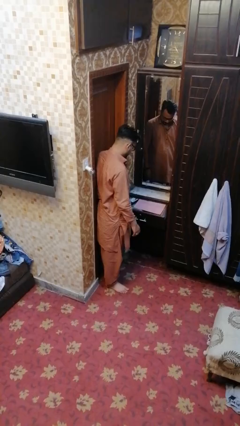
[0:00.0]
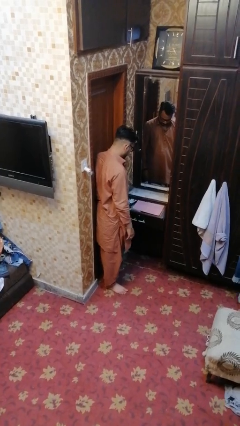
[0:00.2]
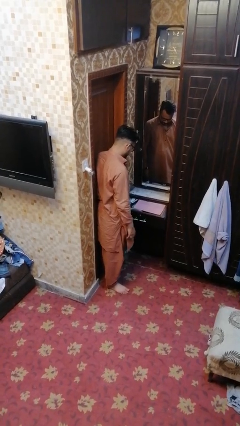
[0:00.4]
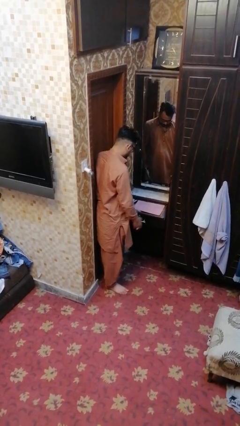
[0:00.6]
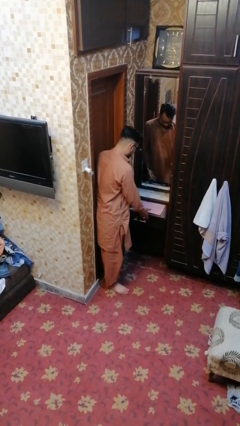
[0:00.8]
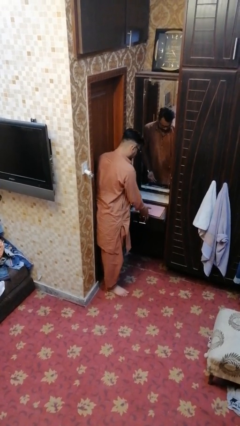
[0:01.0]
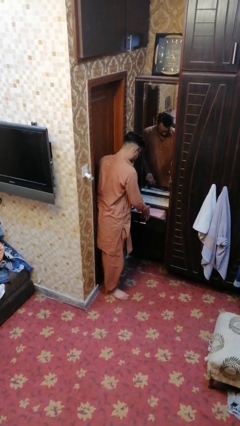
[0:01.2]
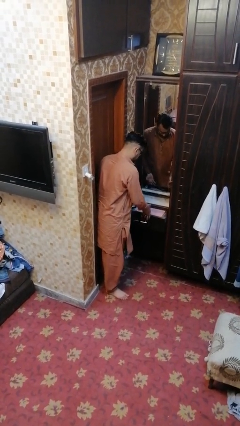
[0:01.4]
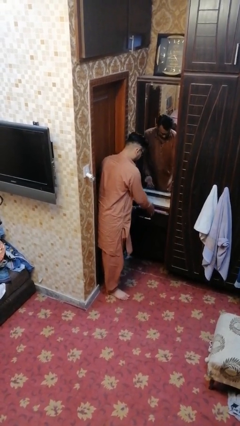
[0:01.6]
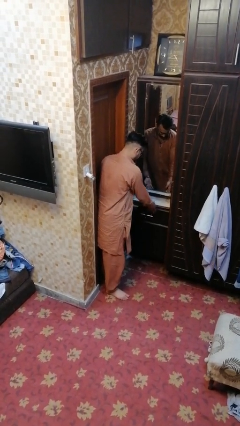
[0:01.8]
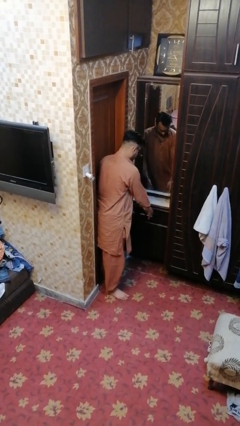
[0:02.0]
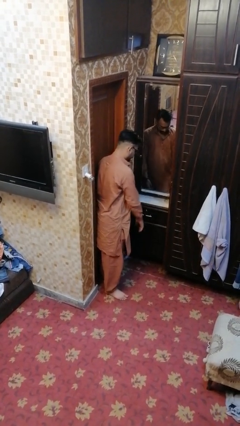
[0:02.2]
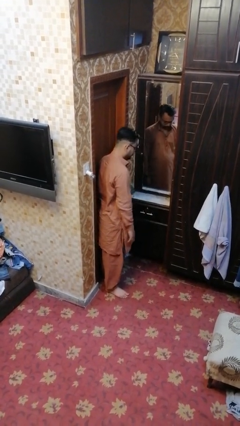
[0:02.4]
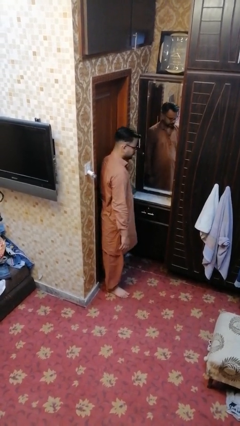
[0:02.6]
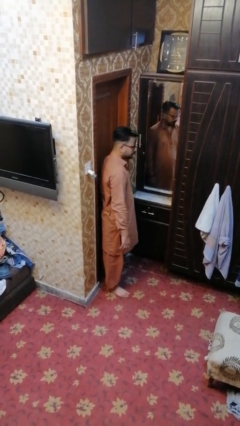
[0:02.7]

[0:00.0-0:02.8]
person closes dresser drawer

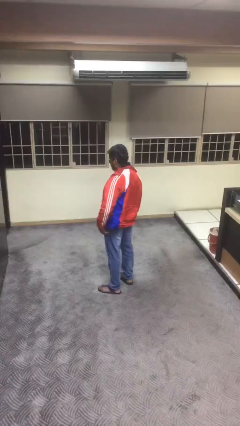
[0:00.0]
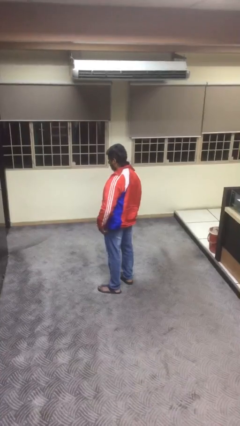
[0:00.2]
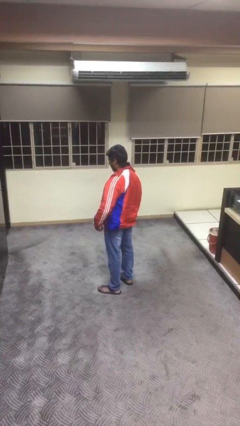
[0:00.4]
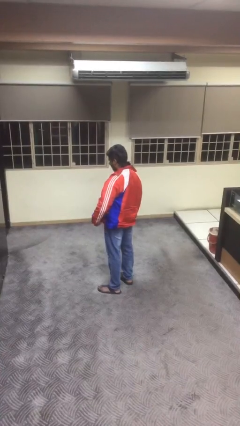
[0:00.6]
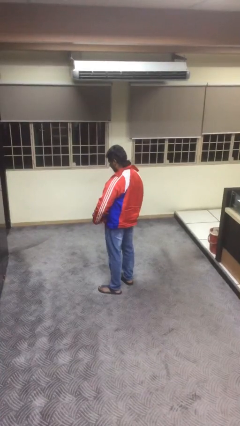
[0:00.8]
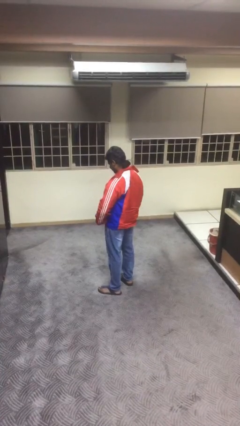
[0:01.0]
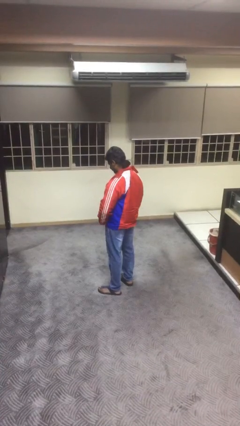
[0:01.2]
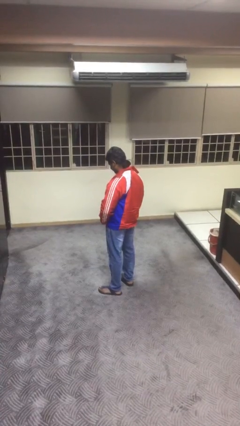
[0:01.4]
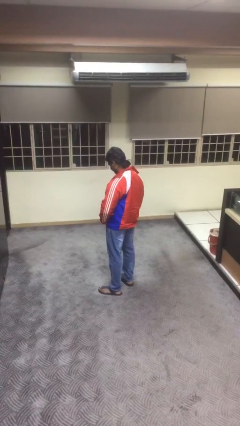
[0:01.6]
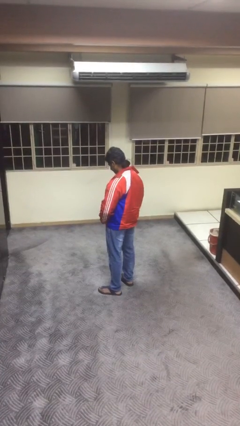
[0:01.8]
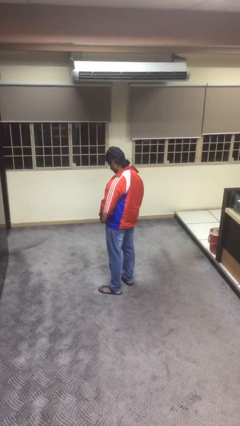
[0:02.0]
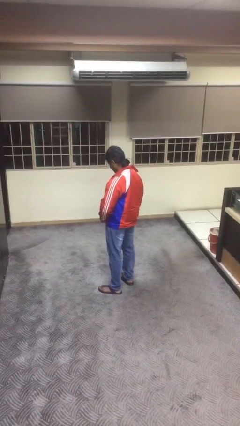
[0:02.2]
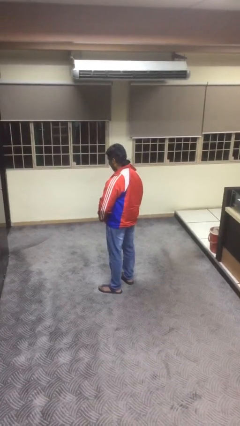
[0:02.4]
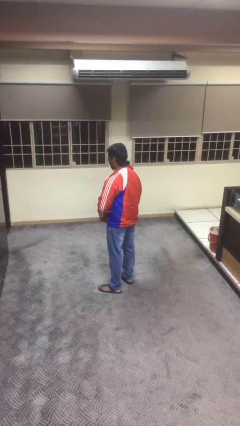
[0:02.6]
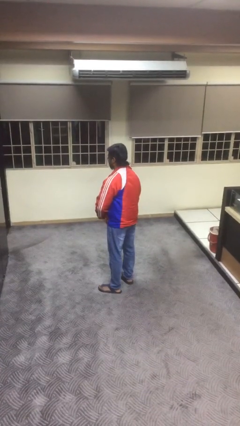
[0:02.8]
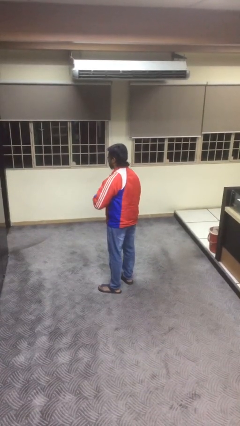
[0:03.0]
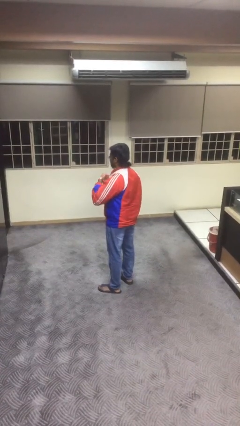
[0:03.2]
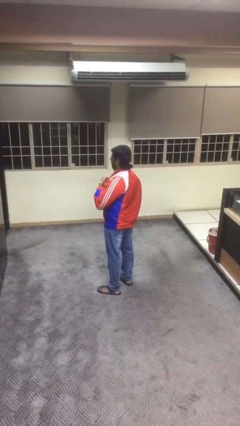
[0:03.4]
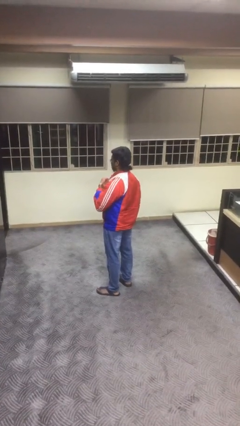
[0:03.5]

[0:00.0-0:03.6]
person zips up jacket

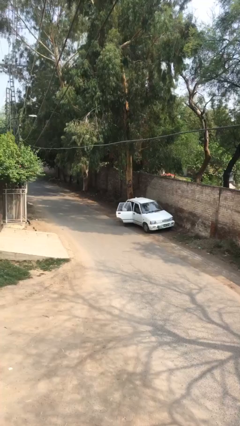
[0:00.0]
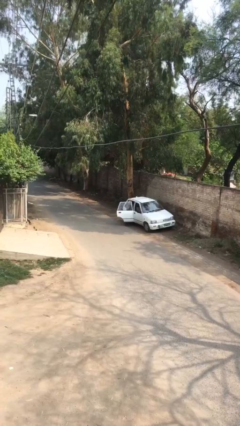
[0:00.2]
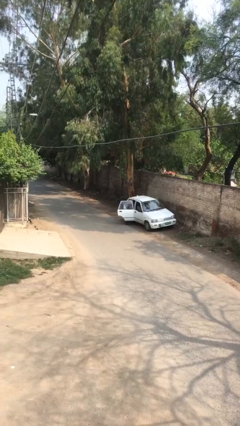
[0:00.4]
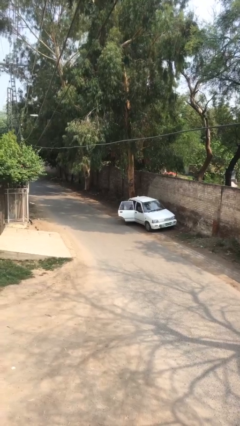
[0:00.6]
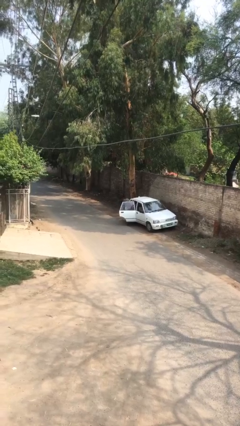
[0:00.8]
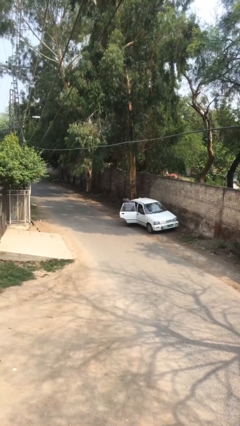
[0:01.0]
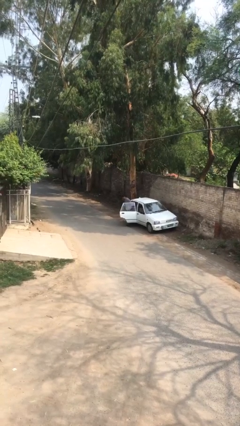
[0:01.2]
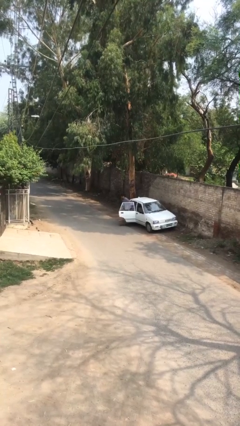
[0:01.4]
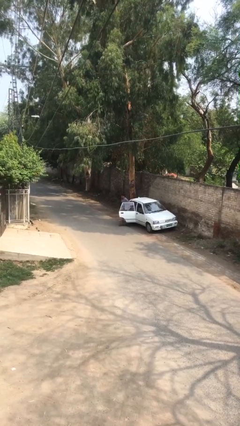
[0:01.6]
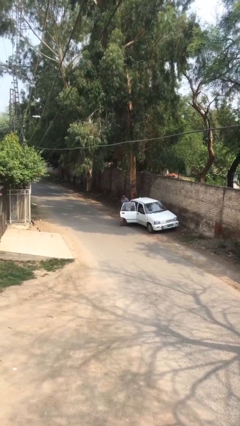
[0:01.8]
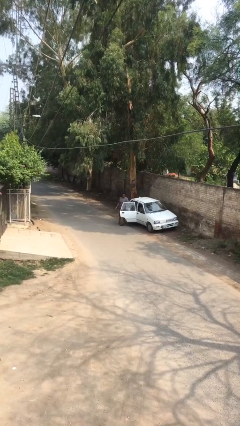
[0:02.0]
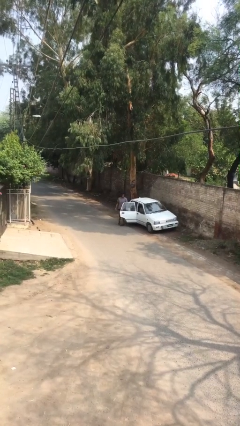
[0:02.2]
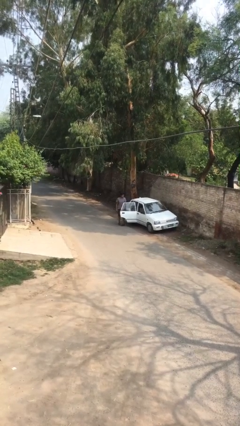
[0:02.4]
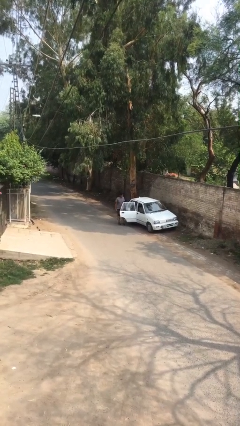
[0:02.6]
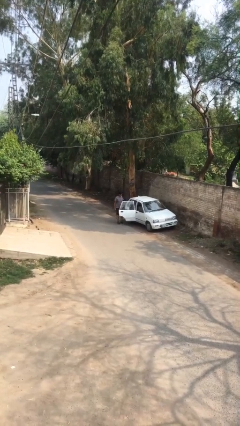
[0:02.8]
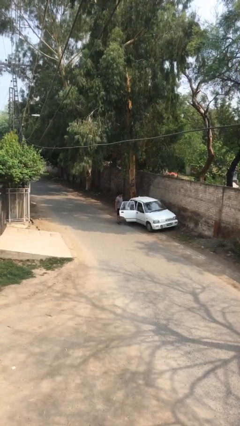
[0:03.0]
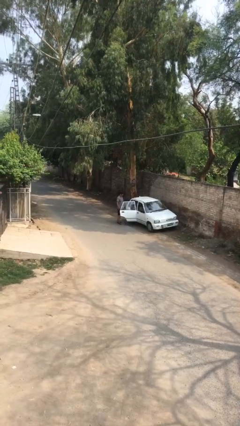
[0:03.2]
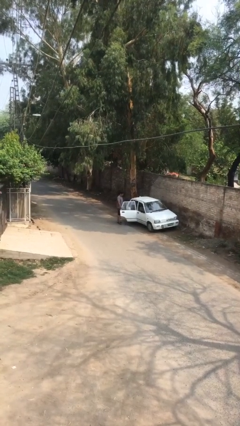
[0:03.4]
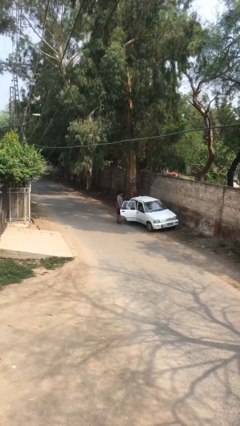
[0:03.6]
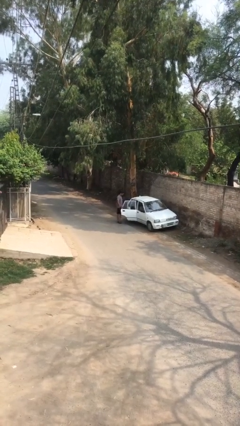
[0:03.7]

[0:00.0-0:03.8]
person exits car

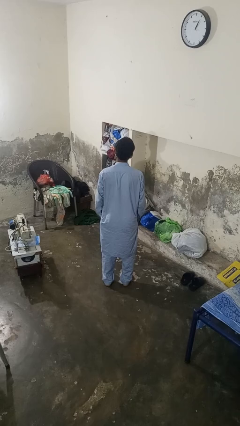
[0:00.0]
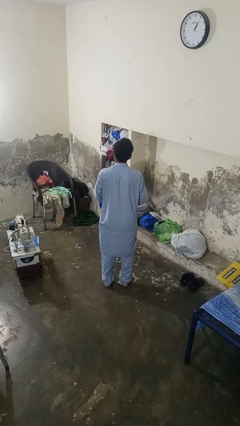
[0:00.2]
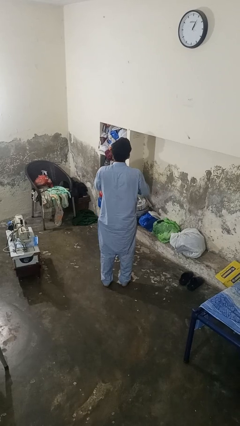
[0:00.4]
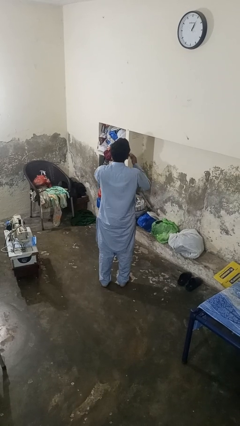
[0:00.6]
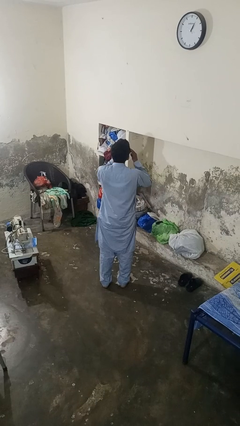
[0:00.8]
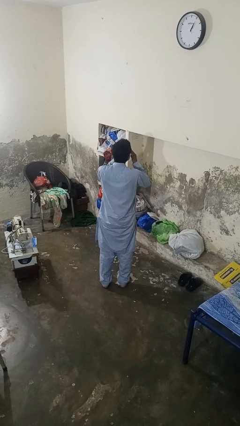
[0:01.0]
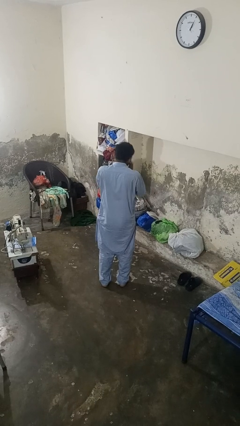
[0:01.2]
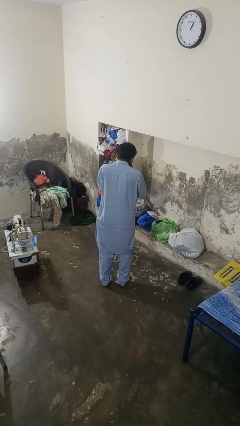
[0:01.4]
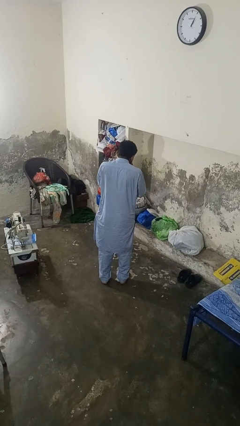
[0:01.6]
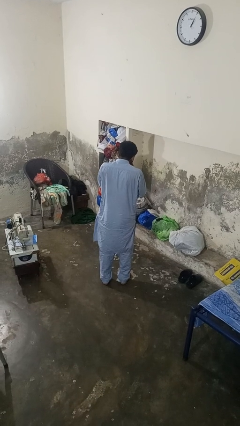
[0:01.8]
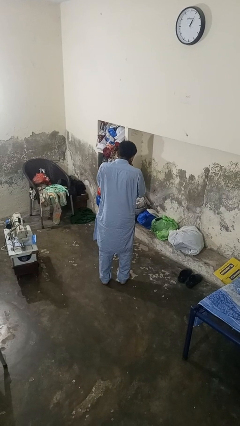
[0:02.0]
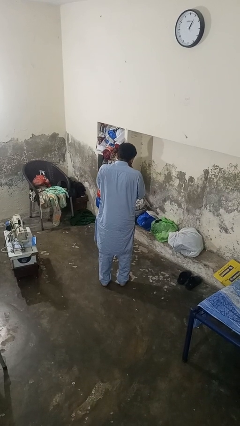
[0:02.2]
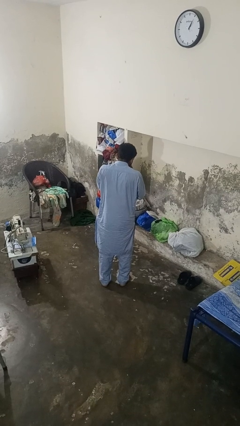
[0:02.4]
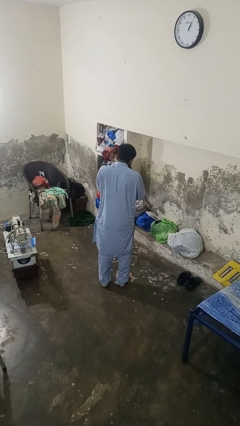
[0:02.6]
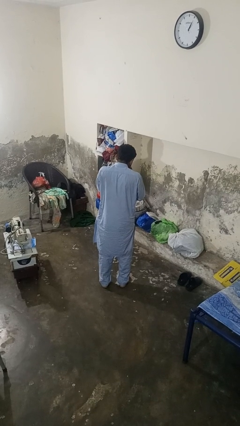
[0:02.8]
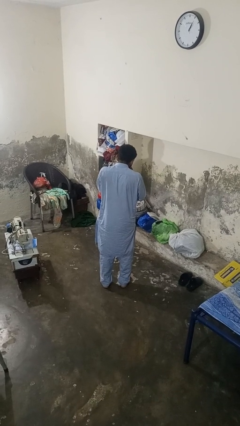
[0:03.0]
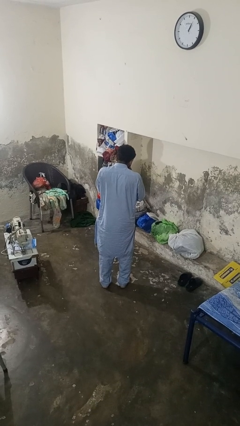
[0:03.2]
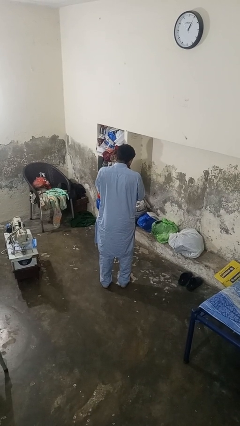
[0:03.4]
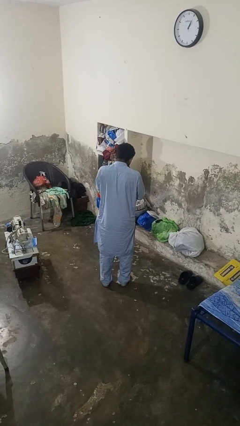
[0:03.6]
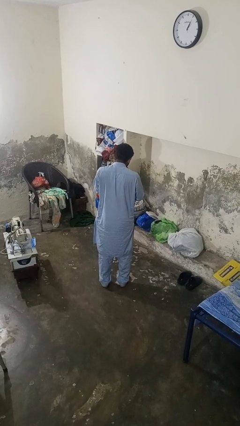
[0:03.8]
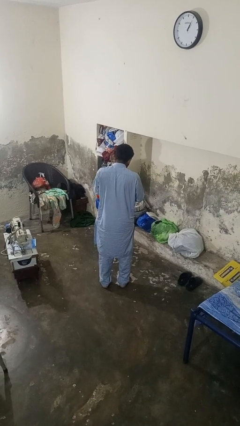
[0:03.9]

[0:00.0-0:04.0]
person sneezes into hand

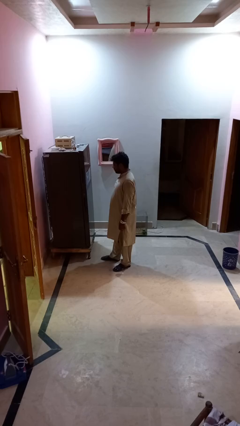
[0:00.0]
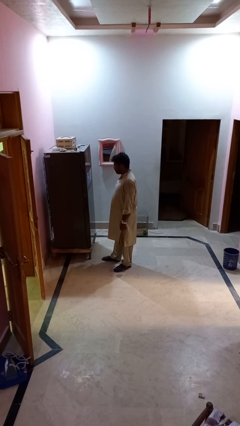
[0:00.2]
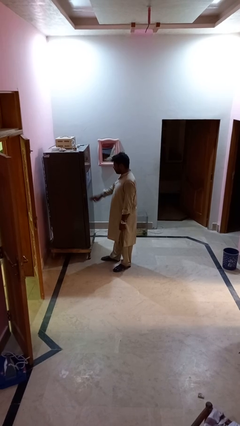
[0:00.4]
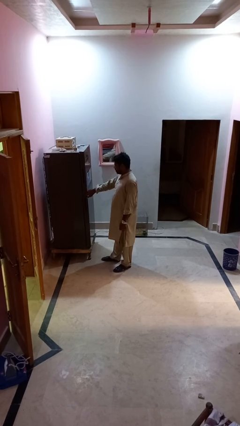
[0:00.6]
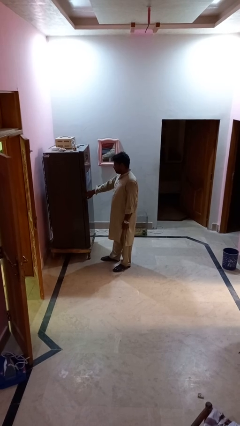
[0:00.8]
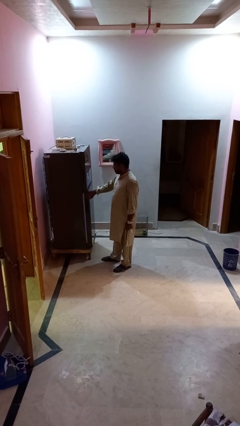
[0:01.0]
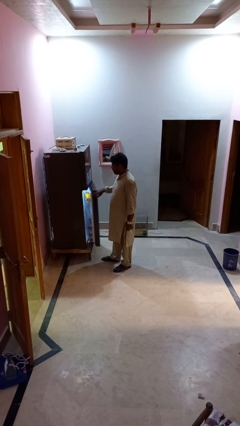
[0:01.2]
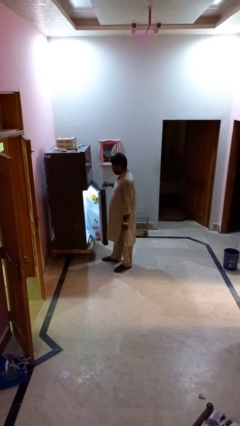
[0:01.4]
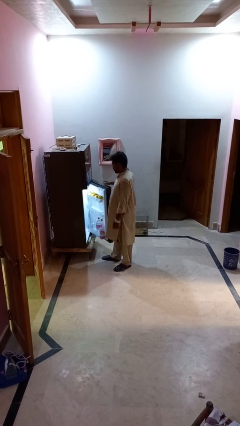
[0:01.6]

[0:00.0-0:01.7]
person opens refrigerator

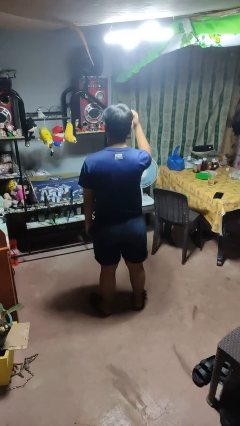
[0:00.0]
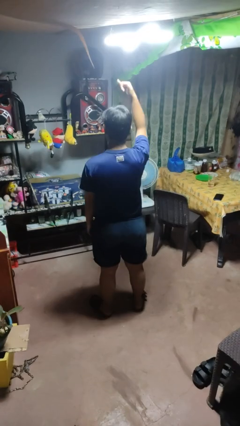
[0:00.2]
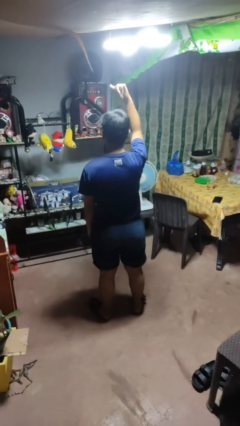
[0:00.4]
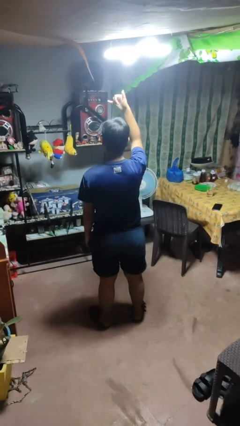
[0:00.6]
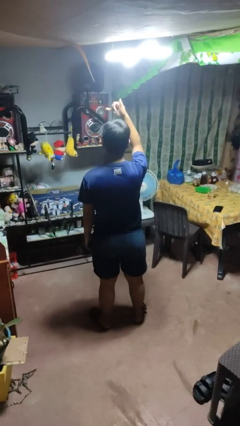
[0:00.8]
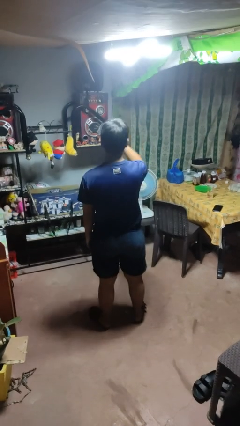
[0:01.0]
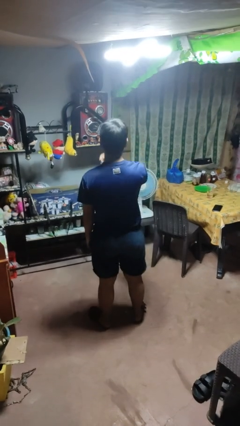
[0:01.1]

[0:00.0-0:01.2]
person gestures hang loose

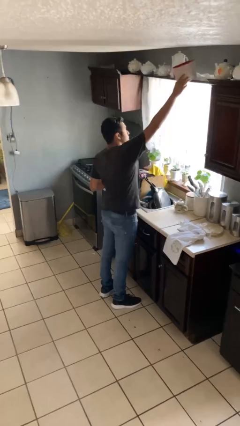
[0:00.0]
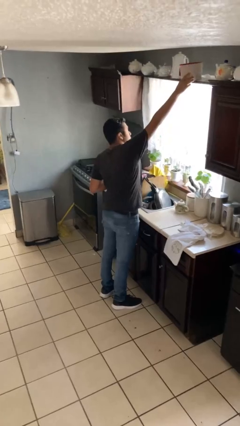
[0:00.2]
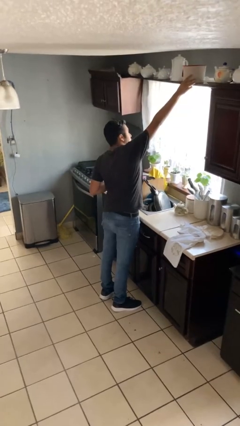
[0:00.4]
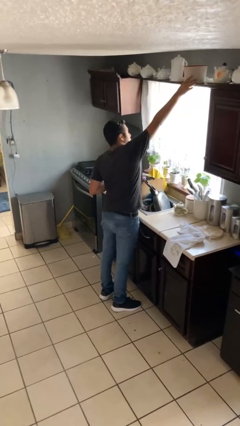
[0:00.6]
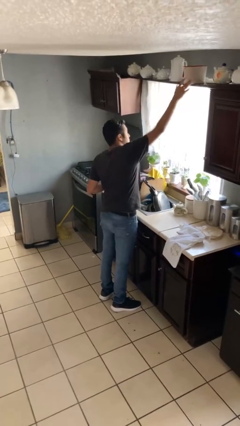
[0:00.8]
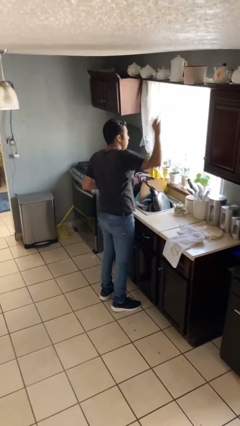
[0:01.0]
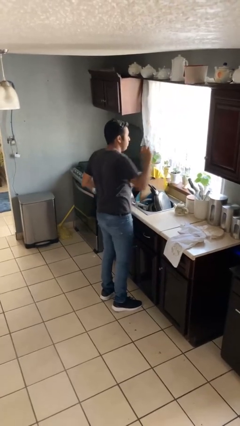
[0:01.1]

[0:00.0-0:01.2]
person puts down object on countertop
